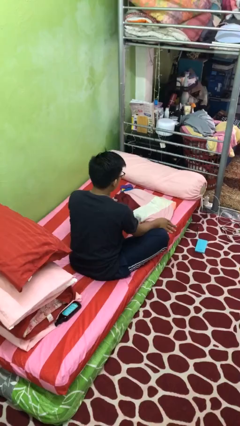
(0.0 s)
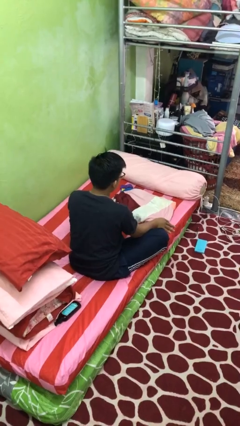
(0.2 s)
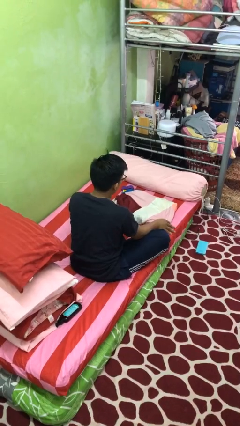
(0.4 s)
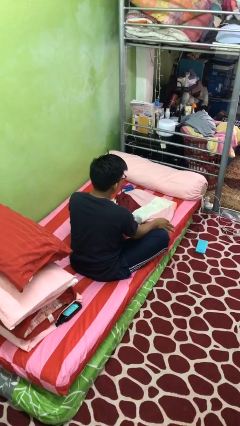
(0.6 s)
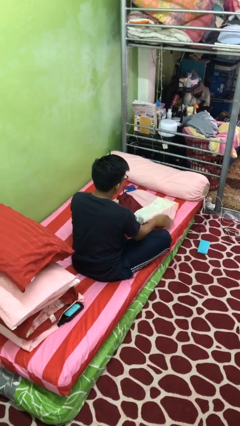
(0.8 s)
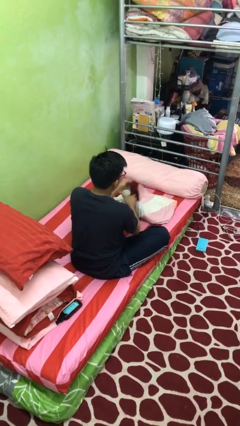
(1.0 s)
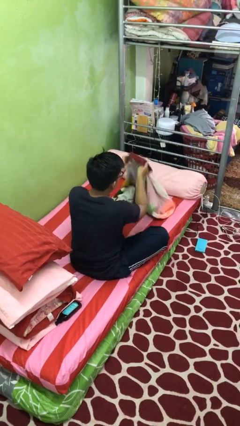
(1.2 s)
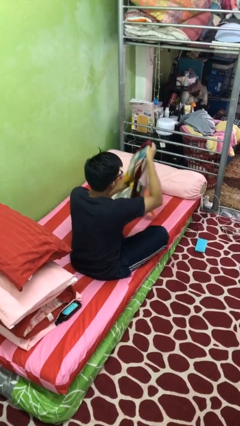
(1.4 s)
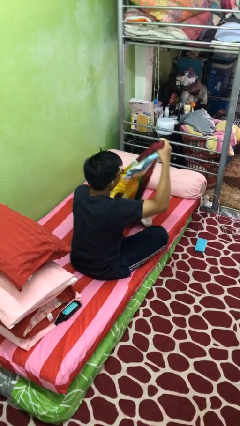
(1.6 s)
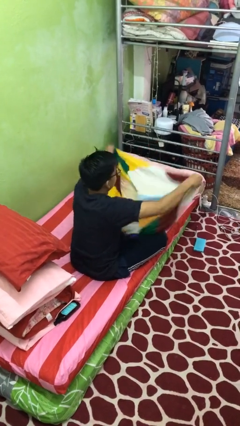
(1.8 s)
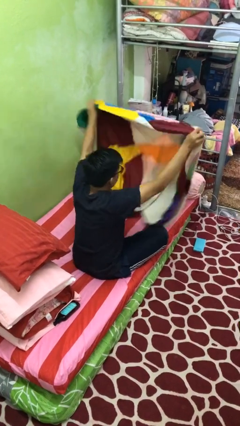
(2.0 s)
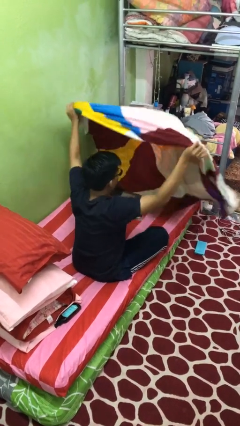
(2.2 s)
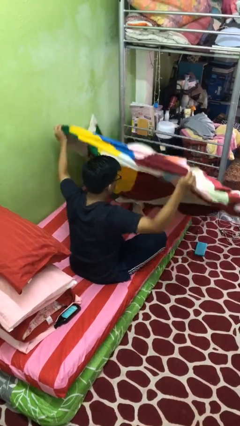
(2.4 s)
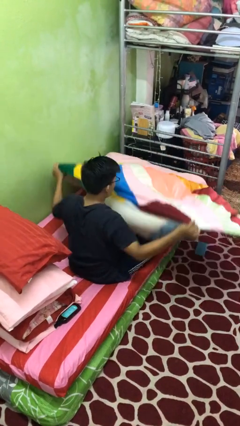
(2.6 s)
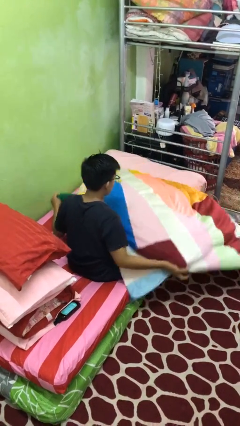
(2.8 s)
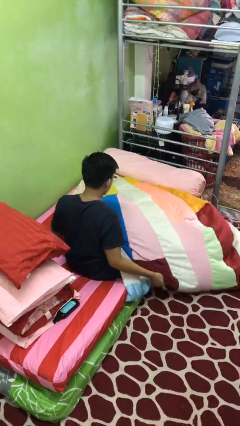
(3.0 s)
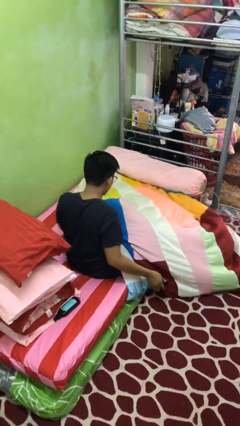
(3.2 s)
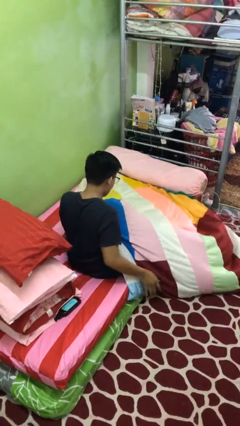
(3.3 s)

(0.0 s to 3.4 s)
person unfolds blanket

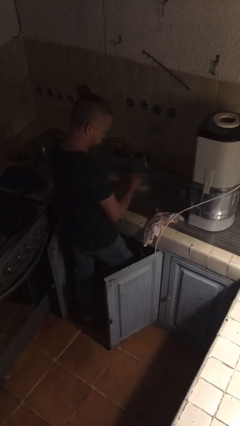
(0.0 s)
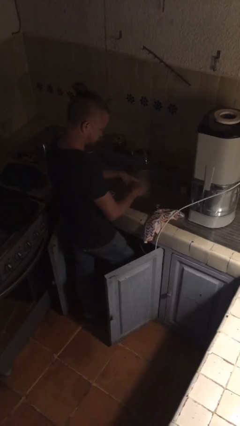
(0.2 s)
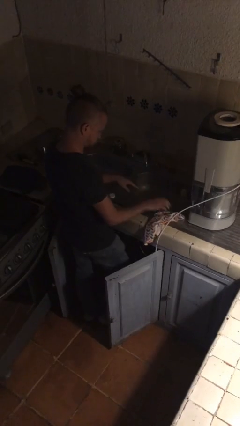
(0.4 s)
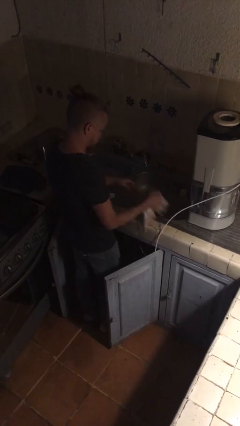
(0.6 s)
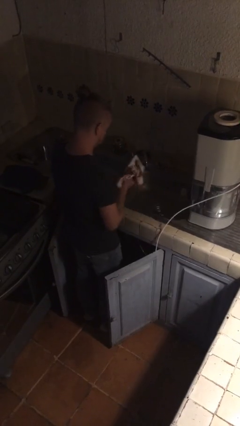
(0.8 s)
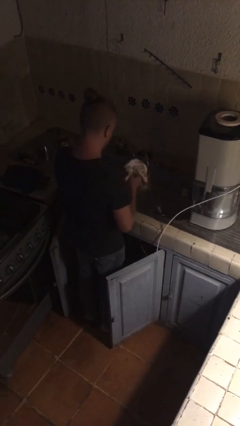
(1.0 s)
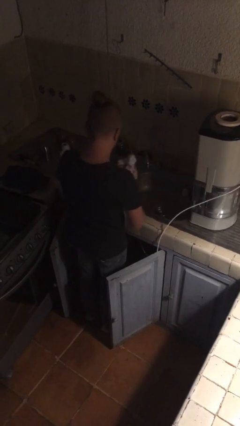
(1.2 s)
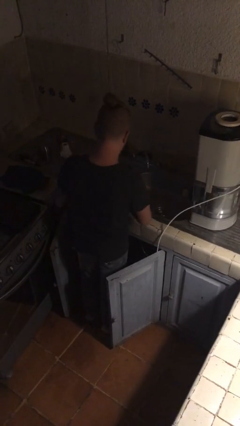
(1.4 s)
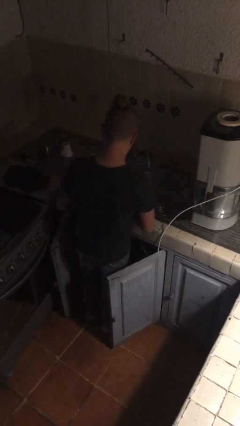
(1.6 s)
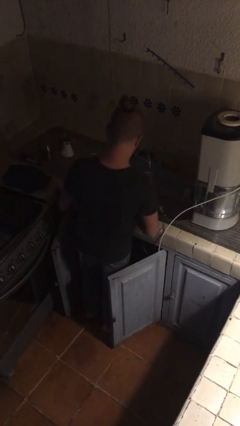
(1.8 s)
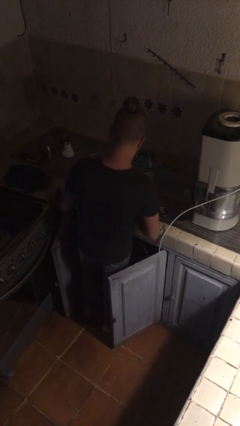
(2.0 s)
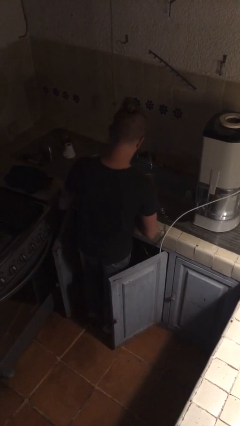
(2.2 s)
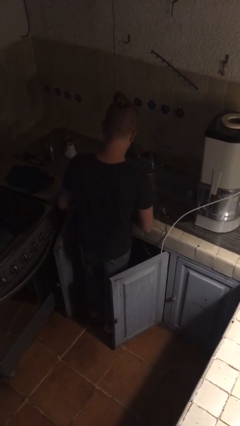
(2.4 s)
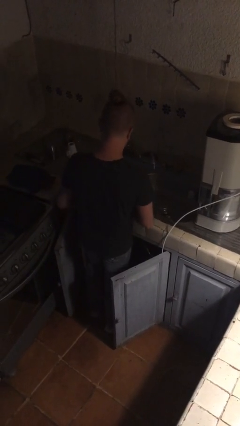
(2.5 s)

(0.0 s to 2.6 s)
person dries hands with towel

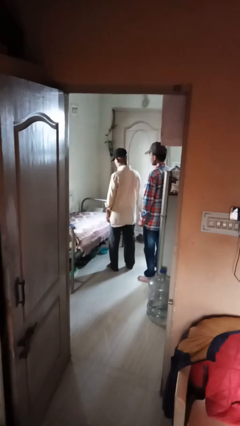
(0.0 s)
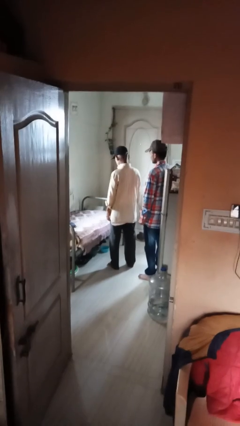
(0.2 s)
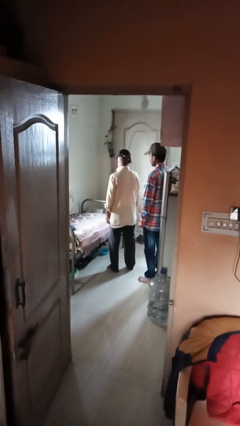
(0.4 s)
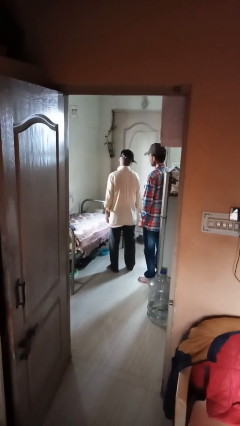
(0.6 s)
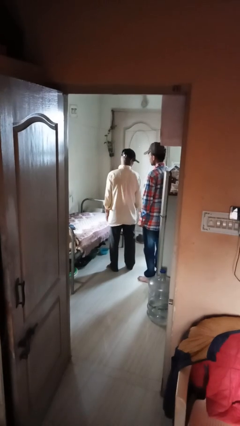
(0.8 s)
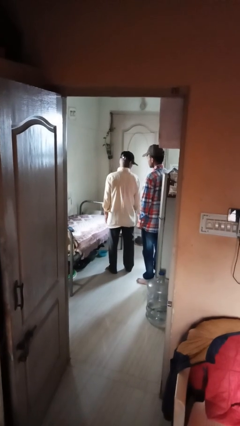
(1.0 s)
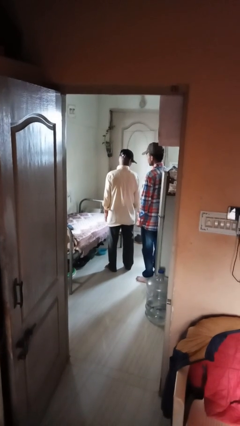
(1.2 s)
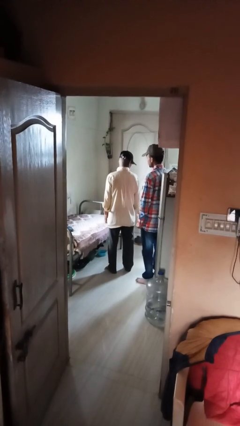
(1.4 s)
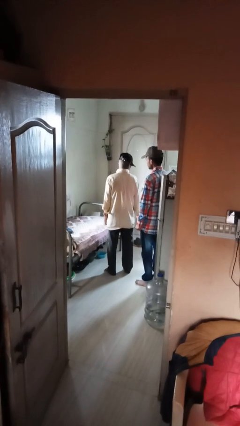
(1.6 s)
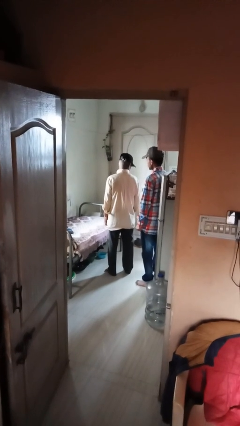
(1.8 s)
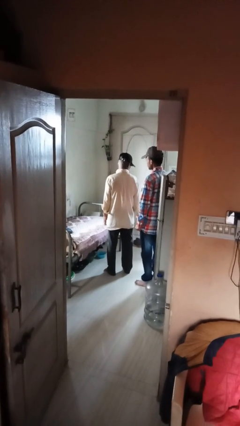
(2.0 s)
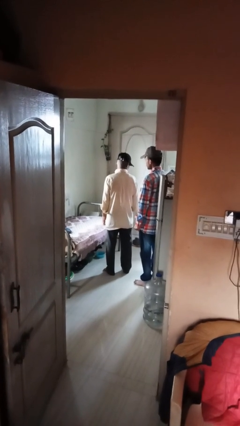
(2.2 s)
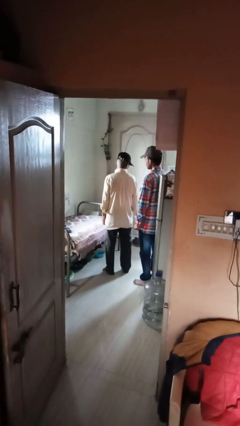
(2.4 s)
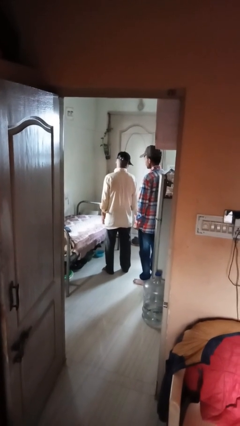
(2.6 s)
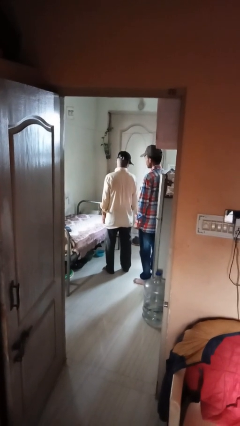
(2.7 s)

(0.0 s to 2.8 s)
person looks over shoulder

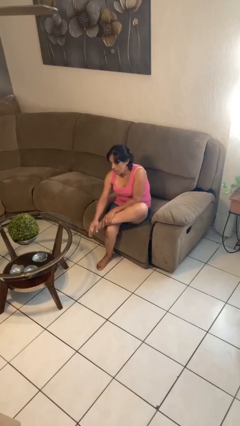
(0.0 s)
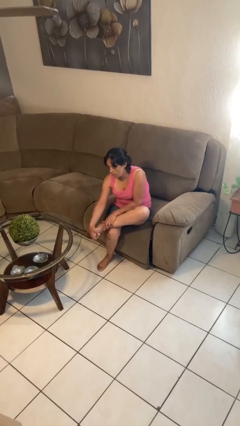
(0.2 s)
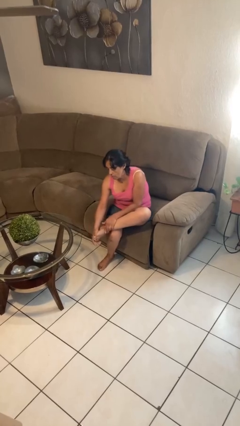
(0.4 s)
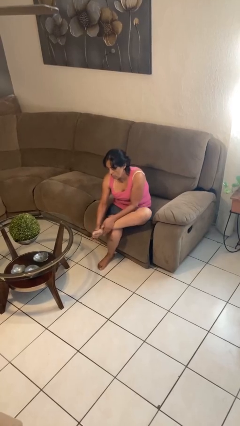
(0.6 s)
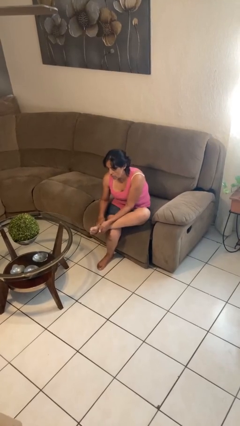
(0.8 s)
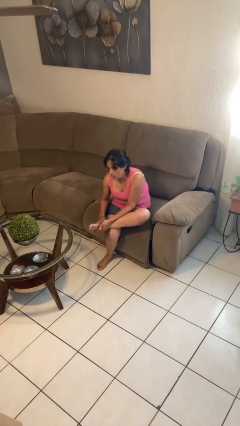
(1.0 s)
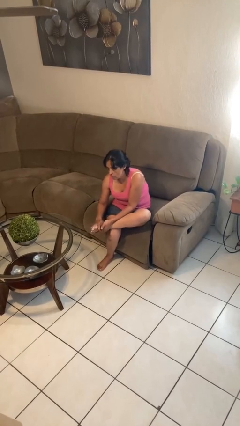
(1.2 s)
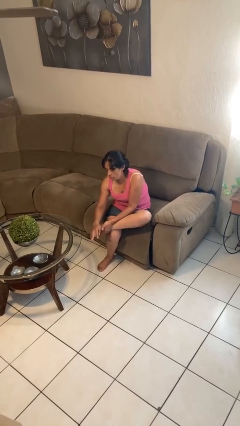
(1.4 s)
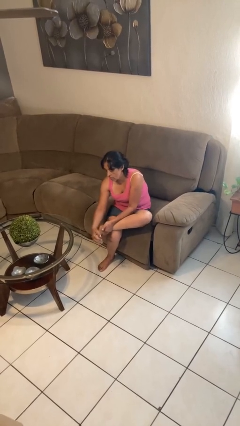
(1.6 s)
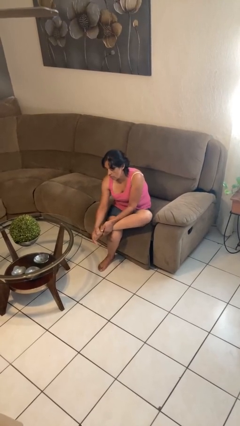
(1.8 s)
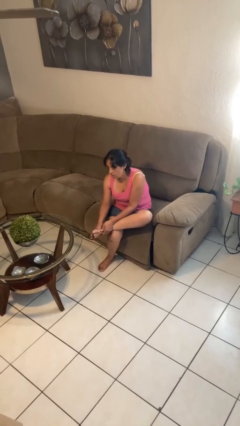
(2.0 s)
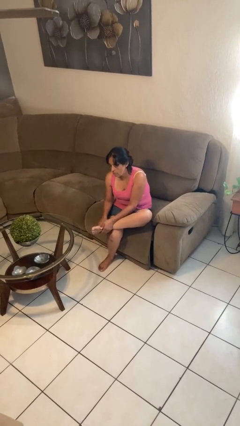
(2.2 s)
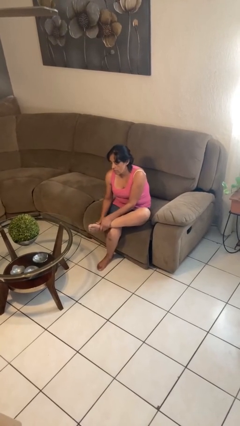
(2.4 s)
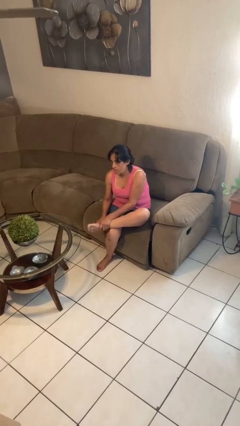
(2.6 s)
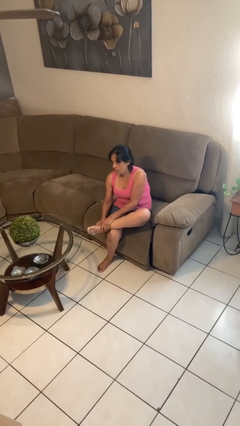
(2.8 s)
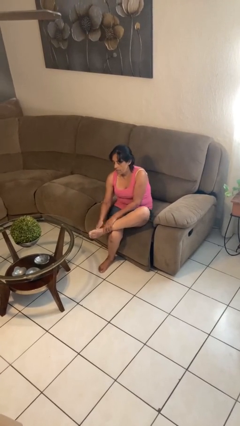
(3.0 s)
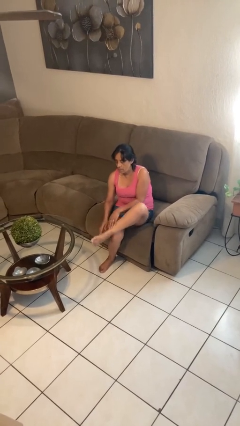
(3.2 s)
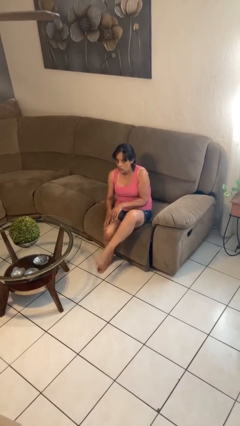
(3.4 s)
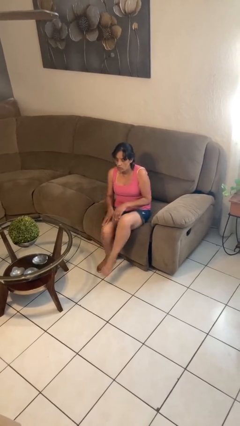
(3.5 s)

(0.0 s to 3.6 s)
person rubs foot

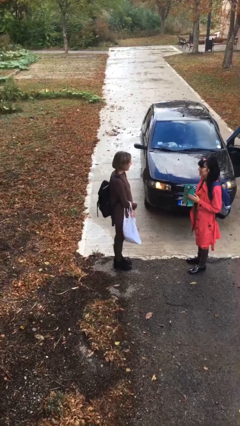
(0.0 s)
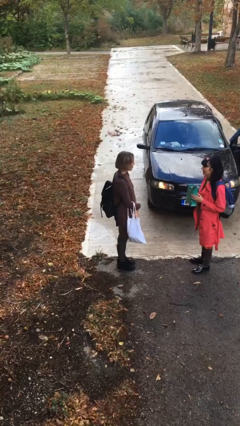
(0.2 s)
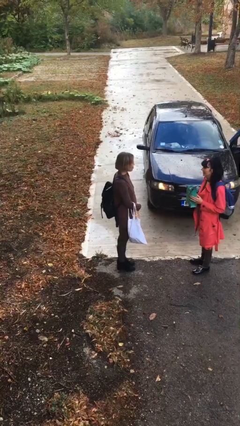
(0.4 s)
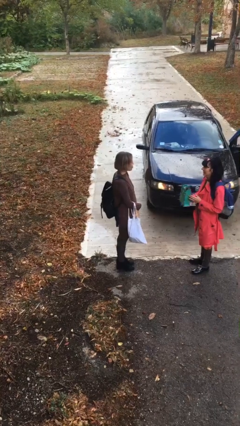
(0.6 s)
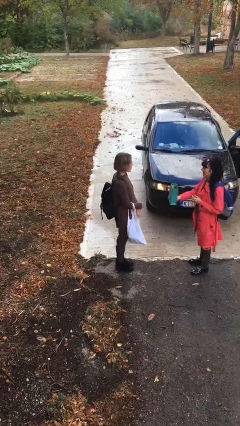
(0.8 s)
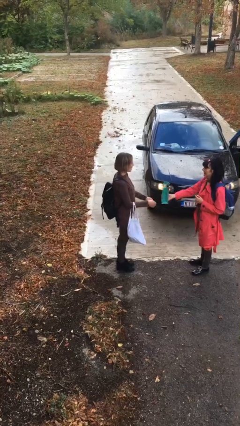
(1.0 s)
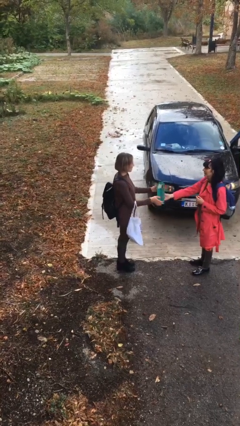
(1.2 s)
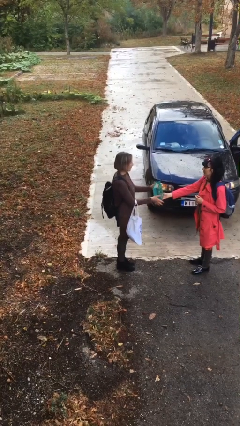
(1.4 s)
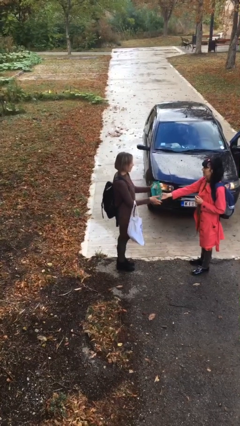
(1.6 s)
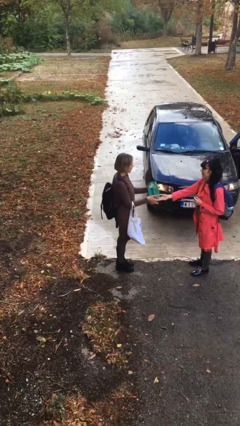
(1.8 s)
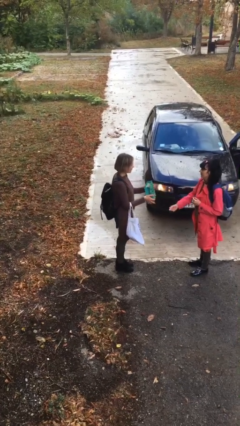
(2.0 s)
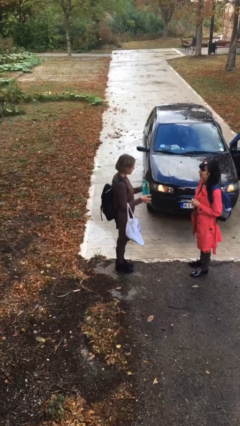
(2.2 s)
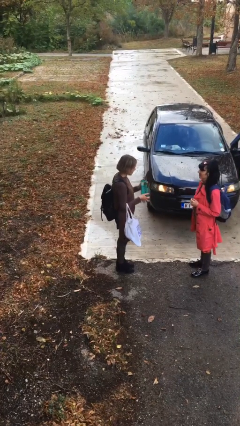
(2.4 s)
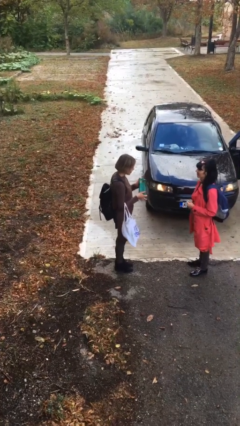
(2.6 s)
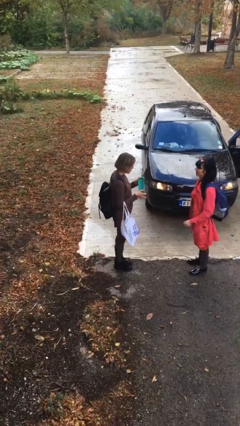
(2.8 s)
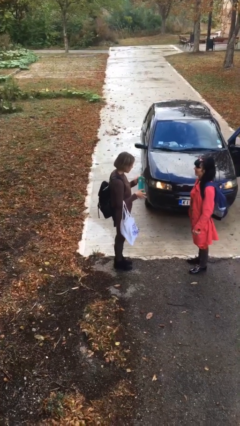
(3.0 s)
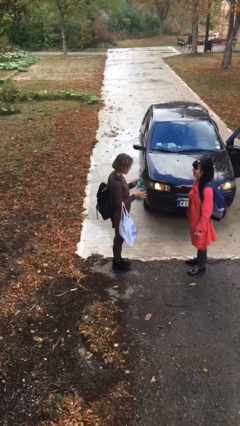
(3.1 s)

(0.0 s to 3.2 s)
person transfers object to person

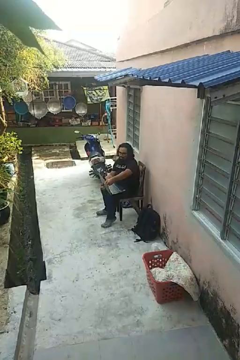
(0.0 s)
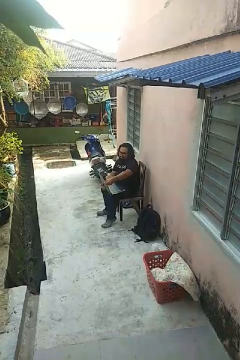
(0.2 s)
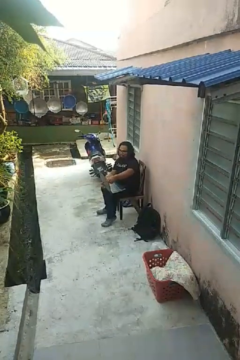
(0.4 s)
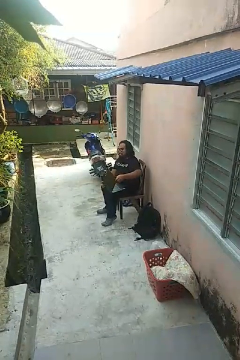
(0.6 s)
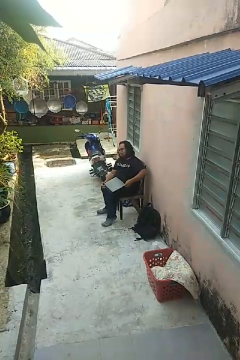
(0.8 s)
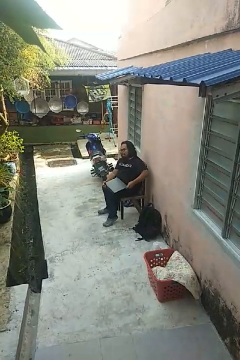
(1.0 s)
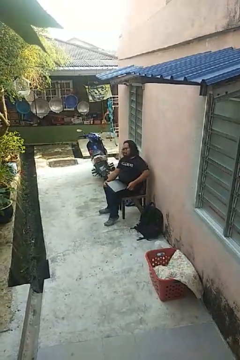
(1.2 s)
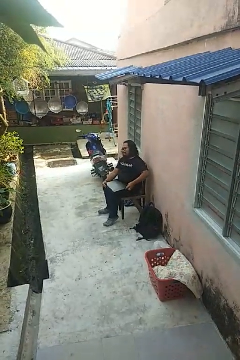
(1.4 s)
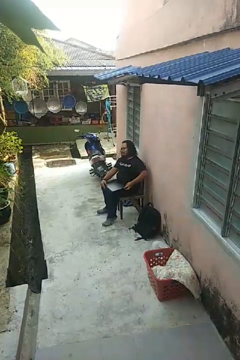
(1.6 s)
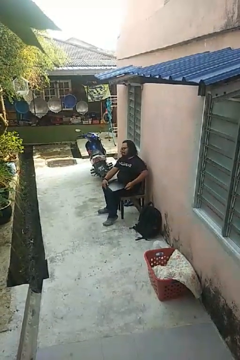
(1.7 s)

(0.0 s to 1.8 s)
person closes laptop

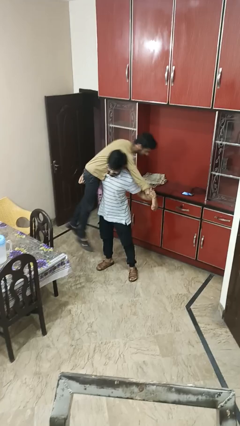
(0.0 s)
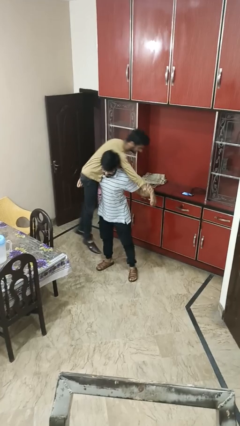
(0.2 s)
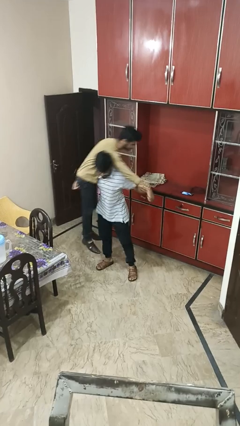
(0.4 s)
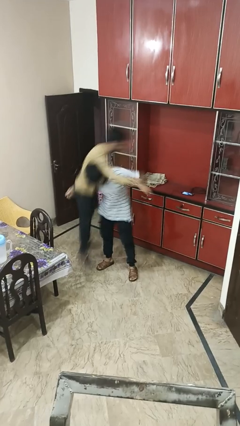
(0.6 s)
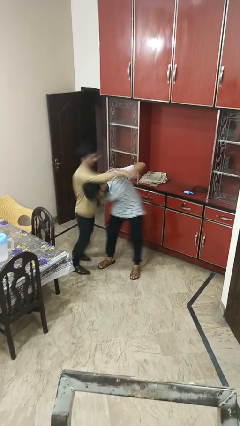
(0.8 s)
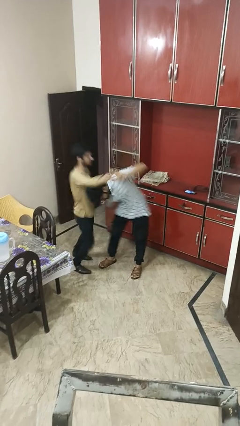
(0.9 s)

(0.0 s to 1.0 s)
person puts down person
